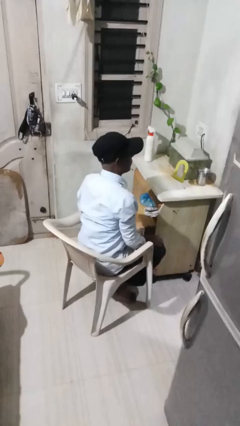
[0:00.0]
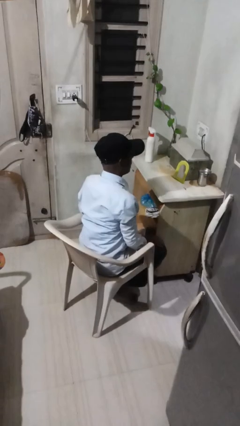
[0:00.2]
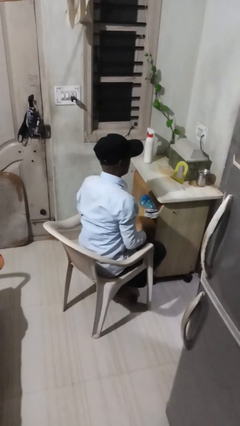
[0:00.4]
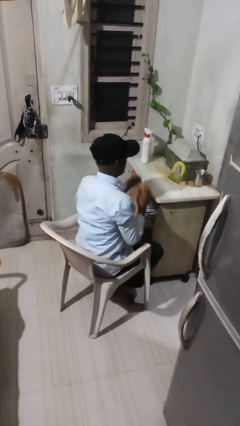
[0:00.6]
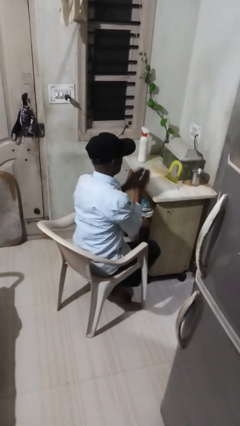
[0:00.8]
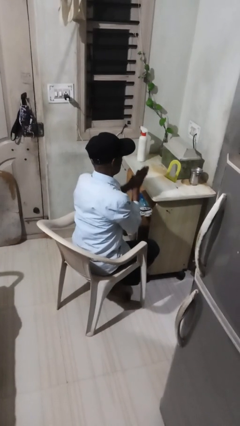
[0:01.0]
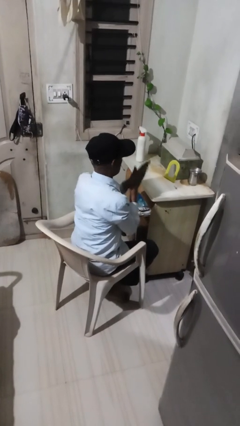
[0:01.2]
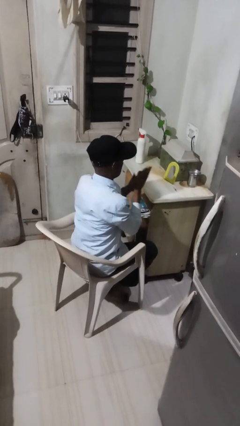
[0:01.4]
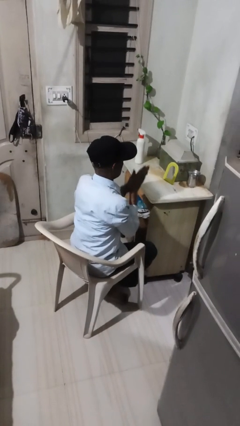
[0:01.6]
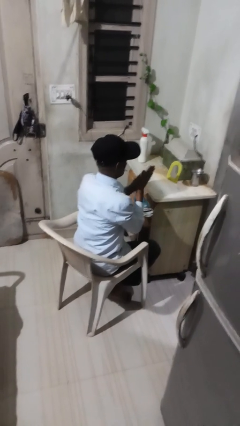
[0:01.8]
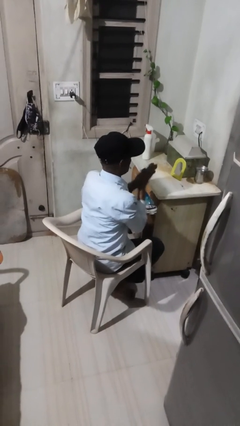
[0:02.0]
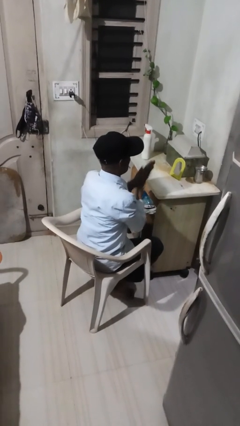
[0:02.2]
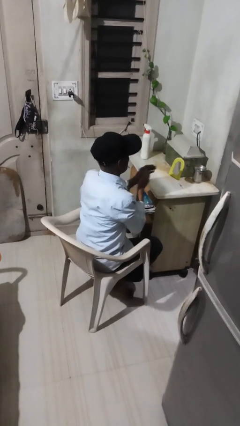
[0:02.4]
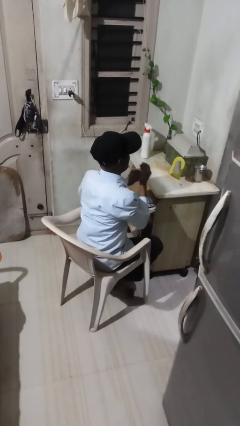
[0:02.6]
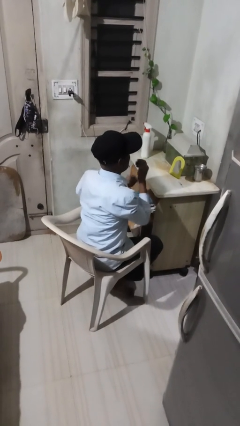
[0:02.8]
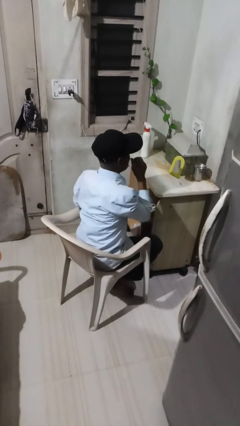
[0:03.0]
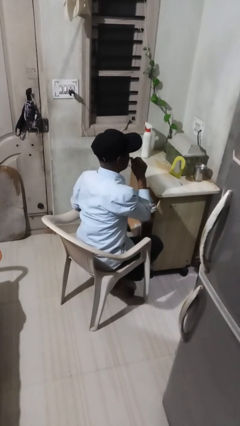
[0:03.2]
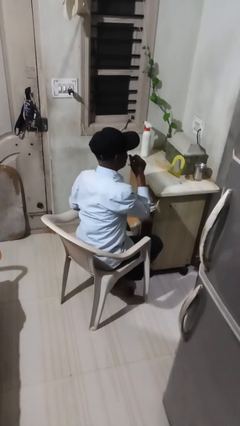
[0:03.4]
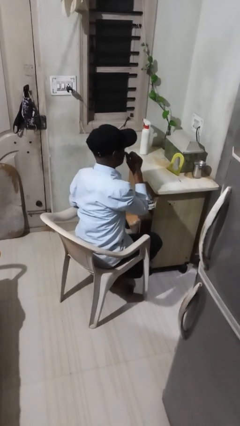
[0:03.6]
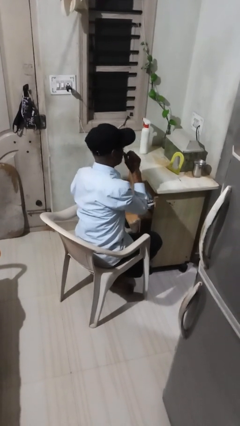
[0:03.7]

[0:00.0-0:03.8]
person blows into hands

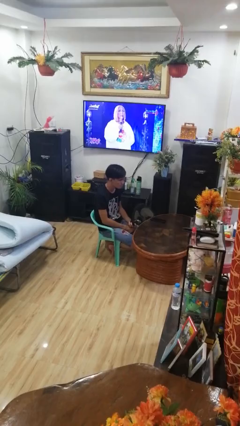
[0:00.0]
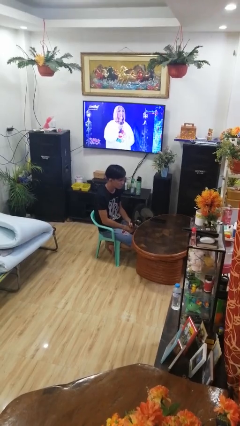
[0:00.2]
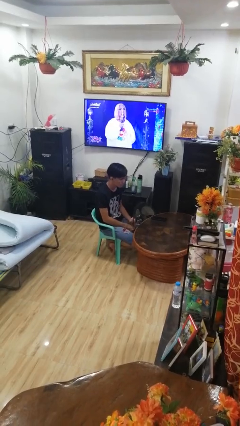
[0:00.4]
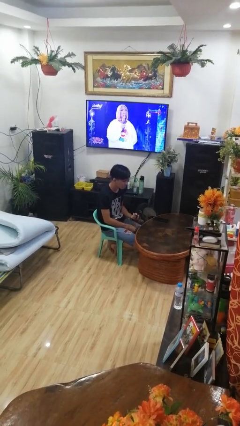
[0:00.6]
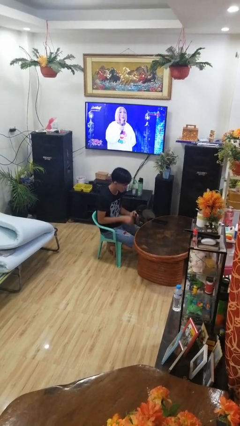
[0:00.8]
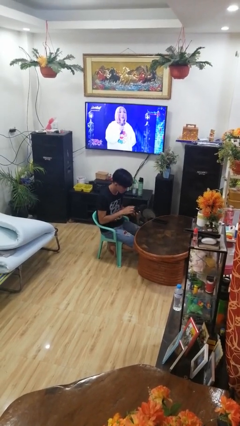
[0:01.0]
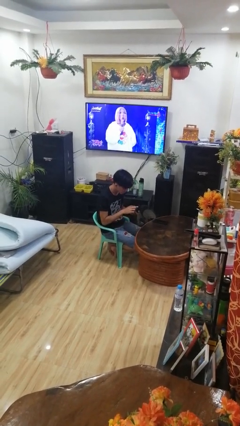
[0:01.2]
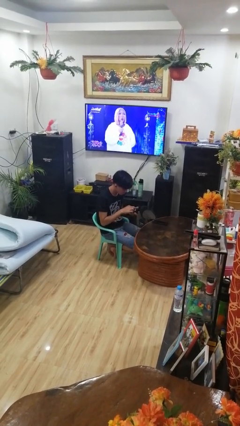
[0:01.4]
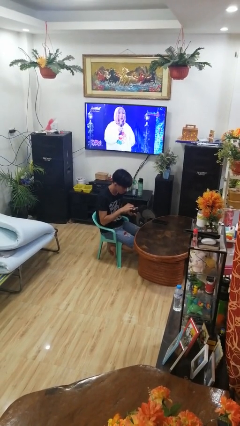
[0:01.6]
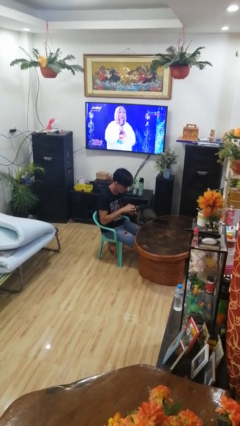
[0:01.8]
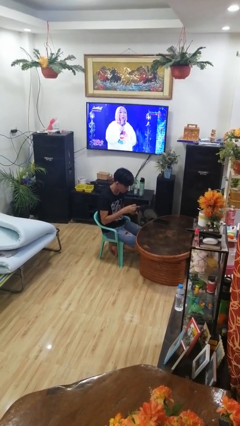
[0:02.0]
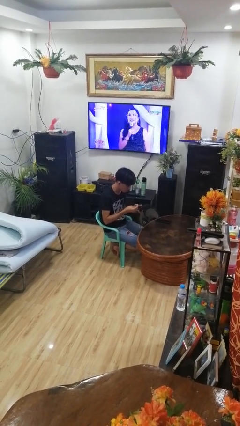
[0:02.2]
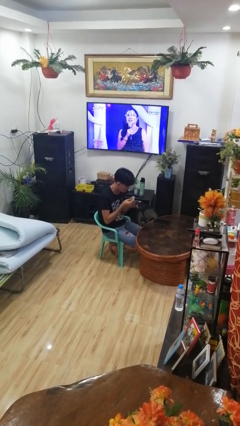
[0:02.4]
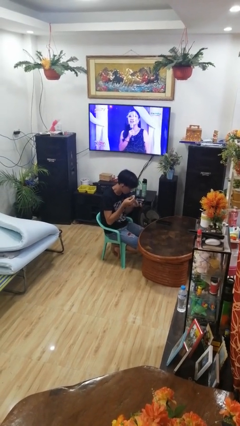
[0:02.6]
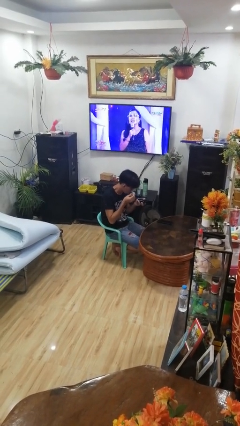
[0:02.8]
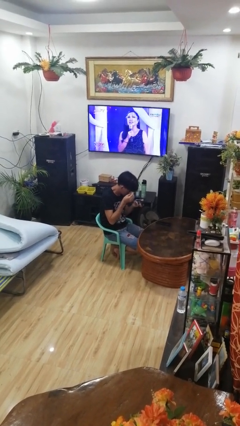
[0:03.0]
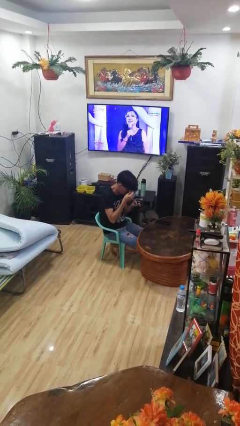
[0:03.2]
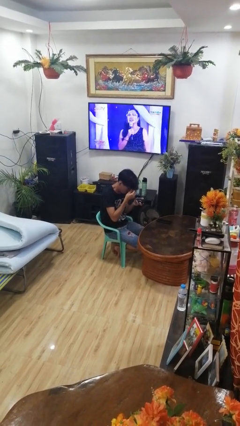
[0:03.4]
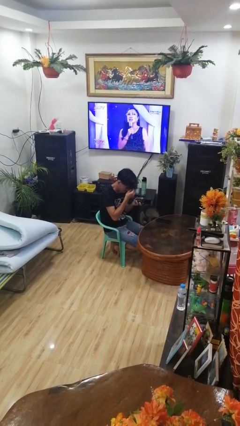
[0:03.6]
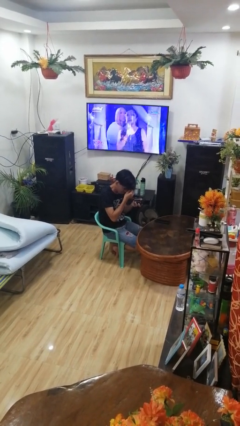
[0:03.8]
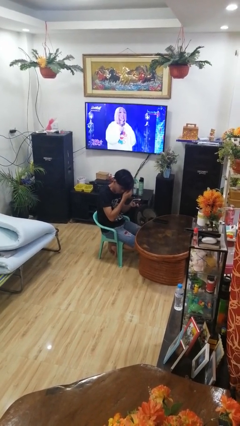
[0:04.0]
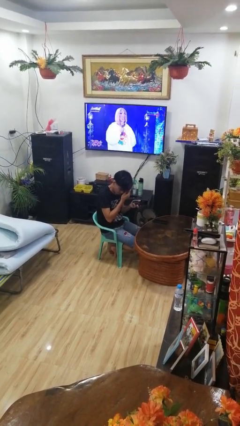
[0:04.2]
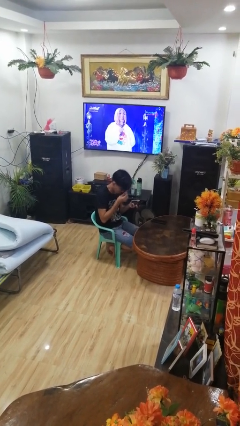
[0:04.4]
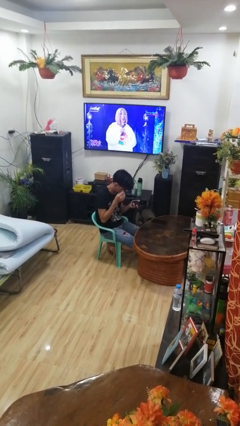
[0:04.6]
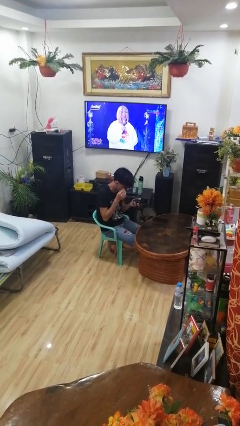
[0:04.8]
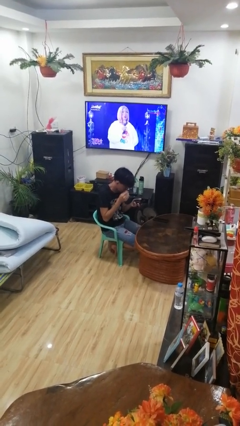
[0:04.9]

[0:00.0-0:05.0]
person applies foundation makeup

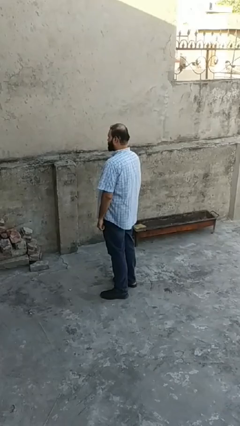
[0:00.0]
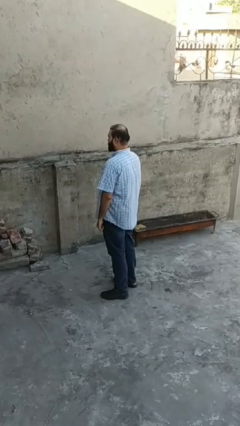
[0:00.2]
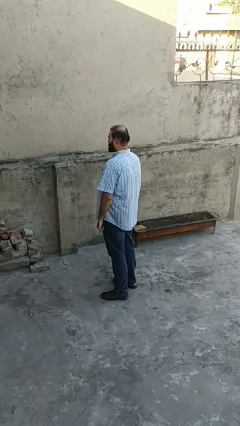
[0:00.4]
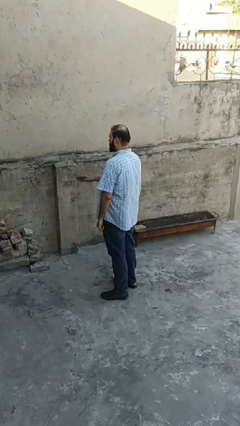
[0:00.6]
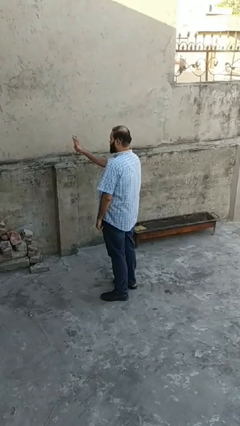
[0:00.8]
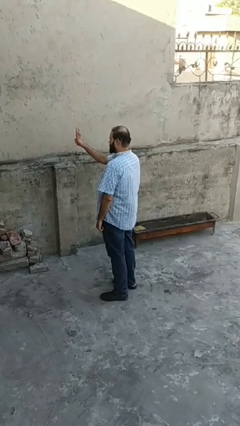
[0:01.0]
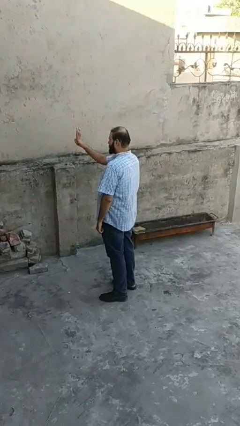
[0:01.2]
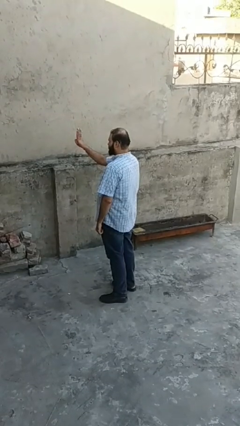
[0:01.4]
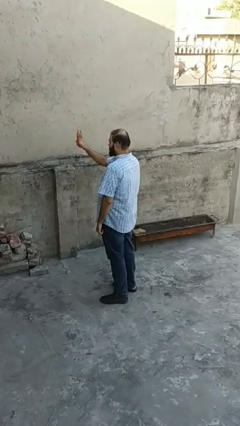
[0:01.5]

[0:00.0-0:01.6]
person gestures number four

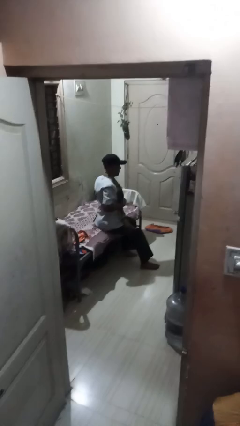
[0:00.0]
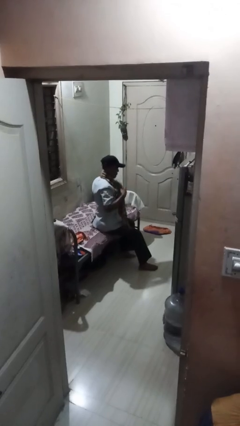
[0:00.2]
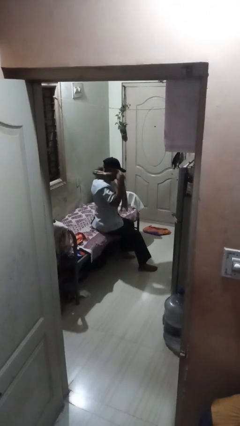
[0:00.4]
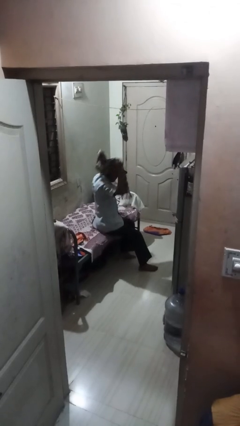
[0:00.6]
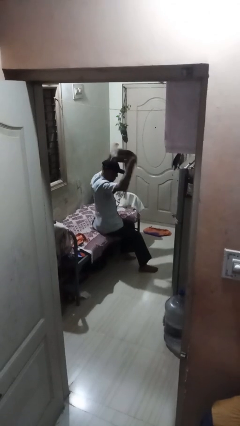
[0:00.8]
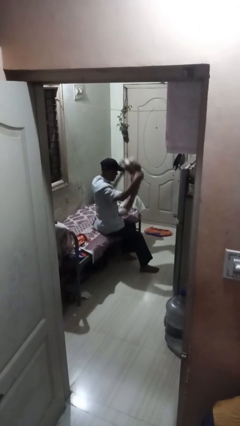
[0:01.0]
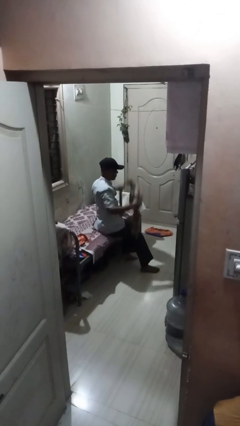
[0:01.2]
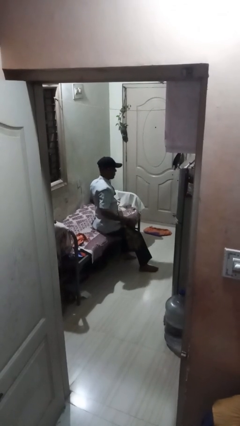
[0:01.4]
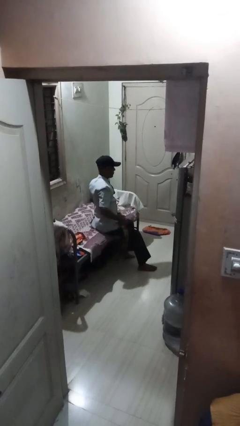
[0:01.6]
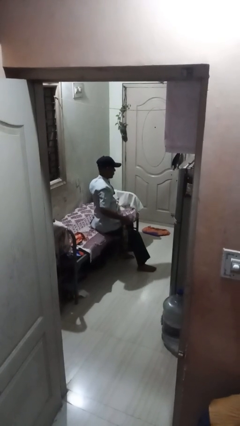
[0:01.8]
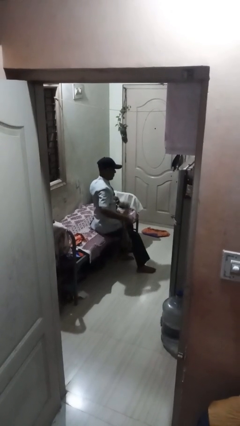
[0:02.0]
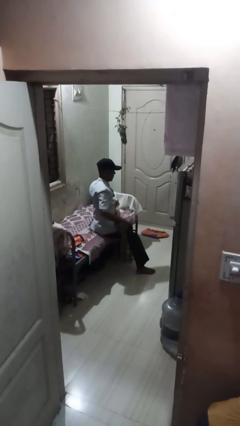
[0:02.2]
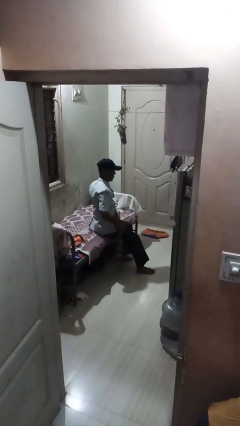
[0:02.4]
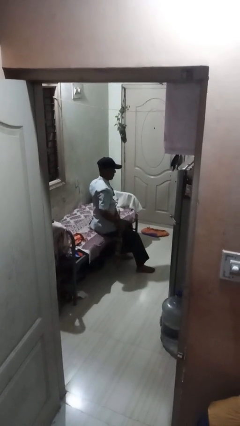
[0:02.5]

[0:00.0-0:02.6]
person takes off scarf

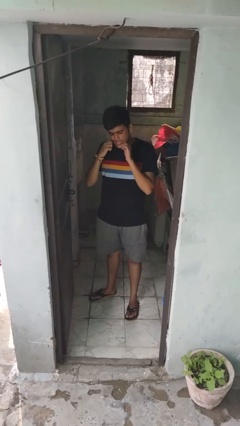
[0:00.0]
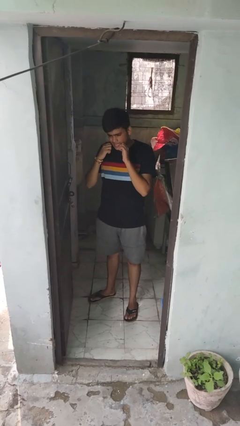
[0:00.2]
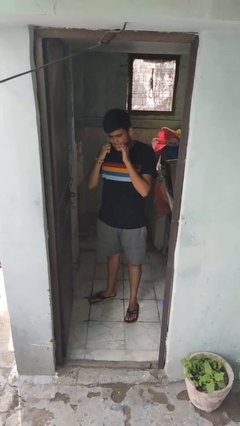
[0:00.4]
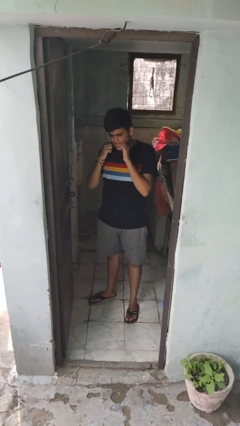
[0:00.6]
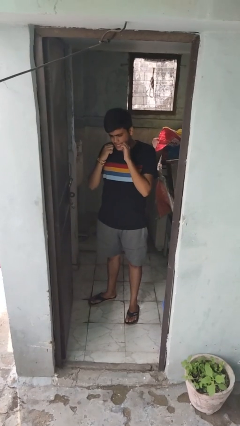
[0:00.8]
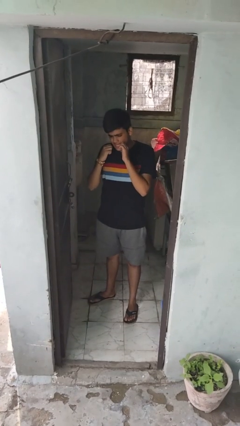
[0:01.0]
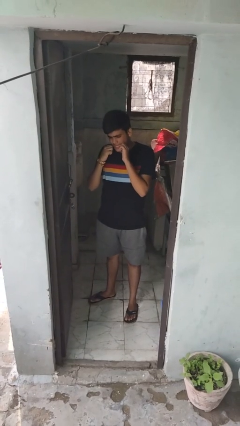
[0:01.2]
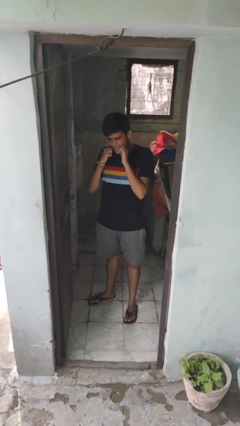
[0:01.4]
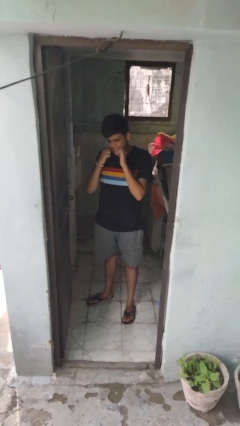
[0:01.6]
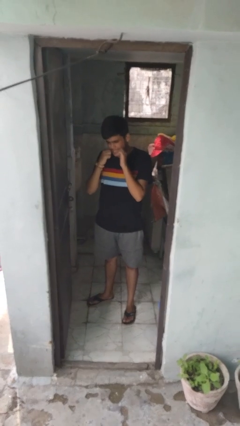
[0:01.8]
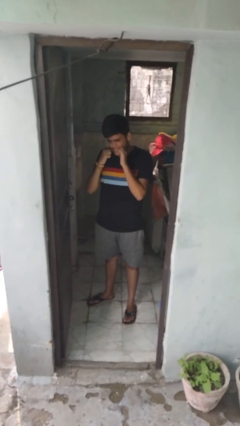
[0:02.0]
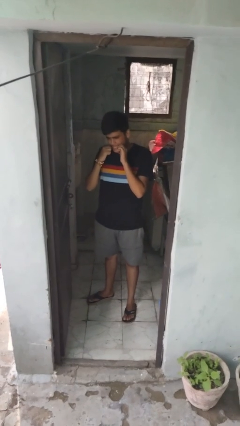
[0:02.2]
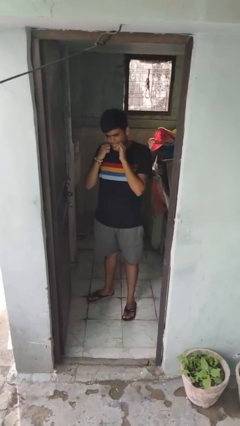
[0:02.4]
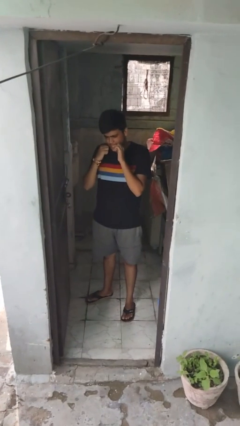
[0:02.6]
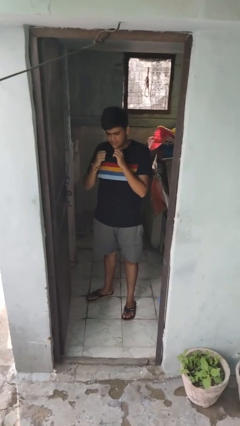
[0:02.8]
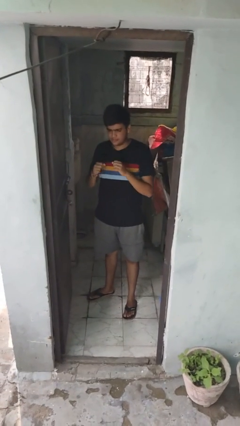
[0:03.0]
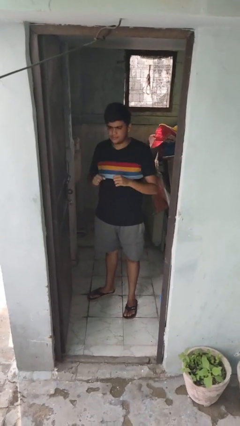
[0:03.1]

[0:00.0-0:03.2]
person flosses

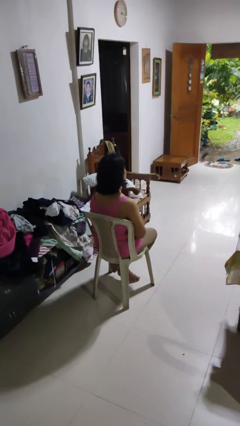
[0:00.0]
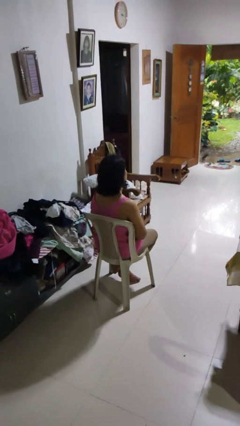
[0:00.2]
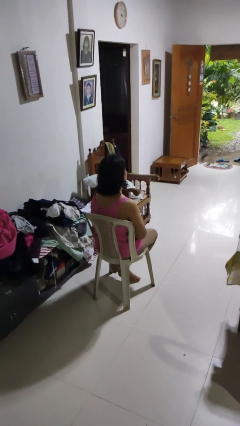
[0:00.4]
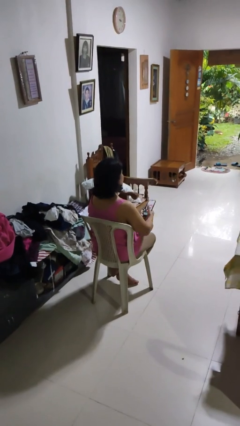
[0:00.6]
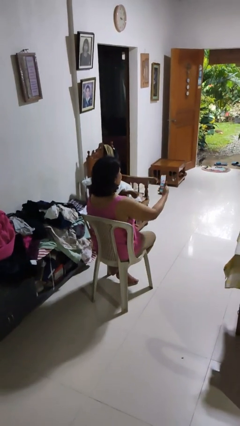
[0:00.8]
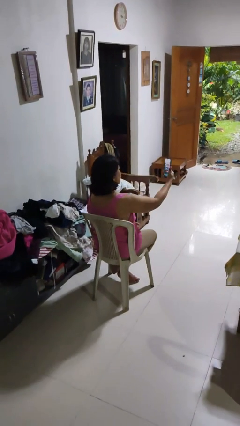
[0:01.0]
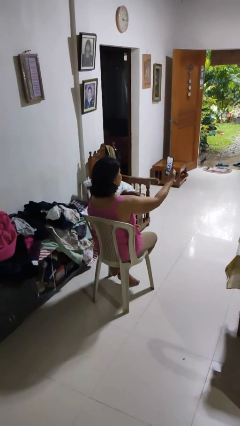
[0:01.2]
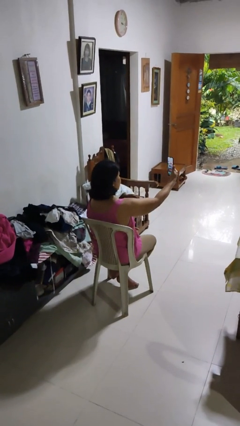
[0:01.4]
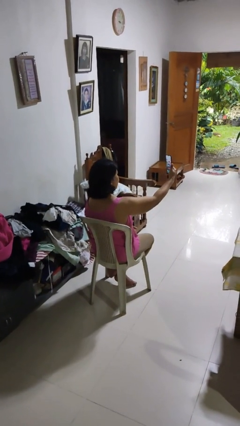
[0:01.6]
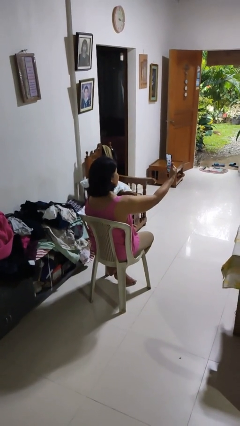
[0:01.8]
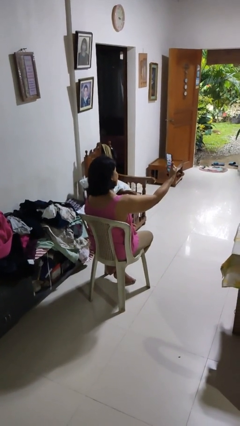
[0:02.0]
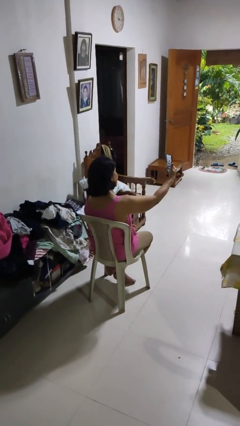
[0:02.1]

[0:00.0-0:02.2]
person takes selfie
